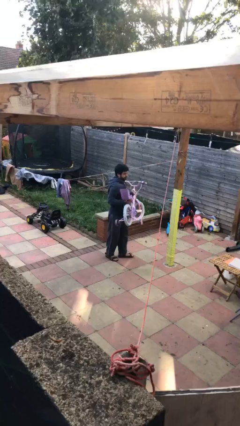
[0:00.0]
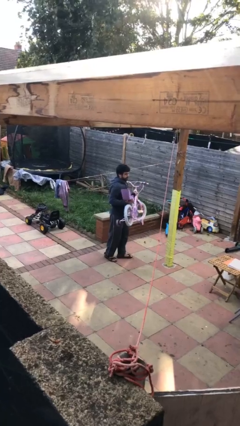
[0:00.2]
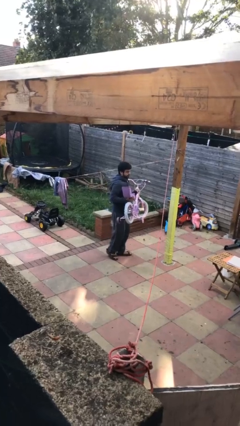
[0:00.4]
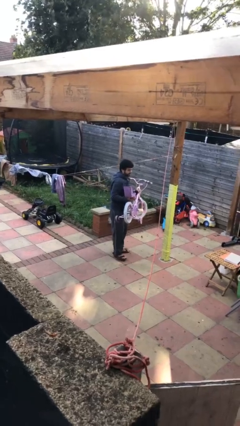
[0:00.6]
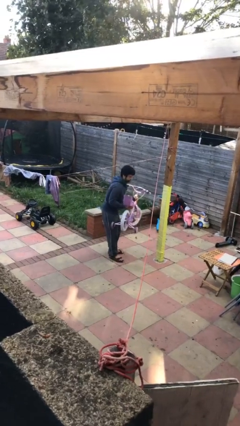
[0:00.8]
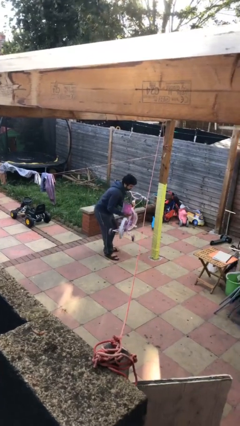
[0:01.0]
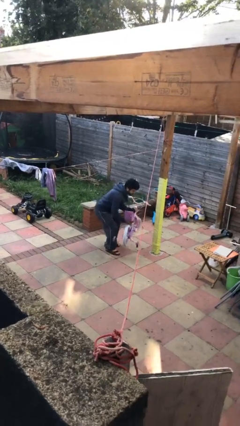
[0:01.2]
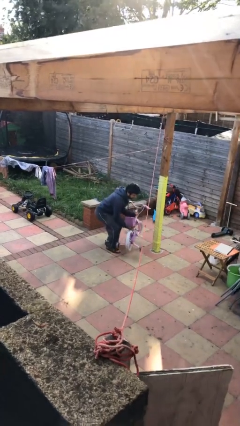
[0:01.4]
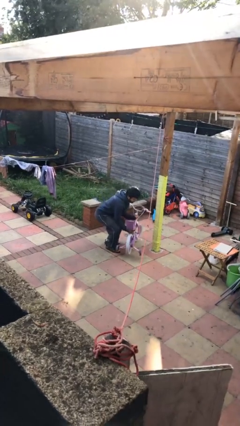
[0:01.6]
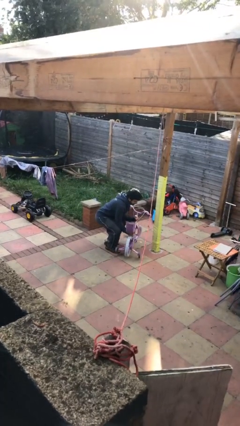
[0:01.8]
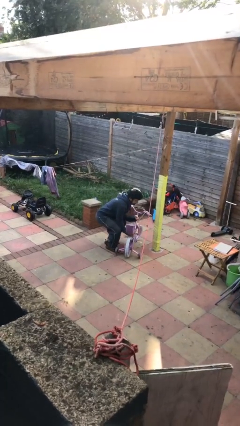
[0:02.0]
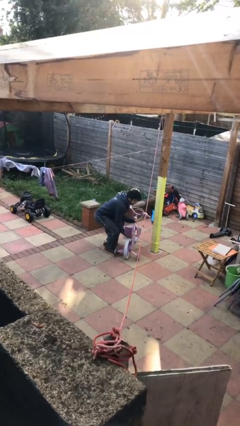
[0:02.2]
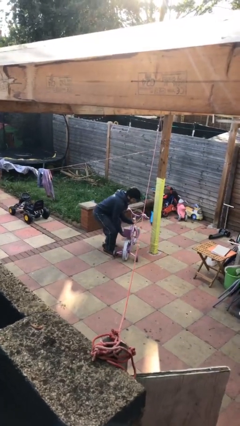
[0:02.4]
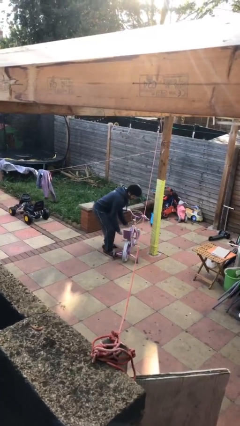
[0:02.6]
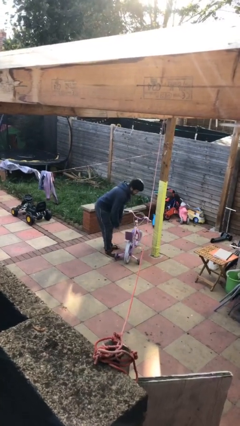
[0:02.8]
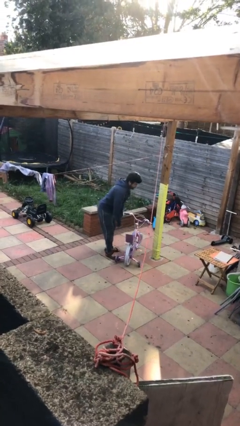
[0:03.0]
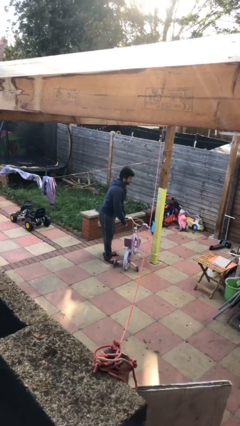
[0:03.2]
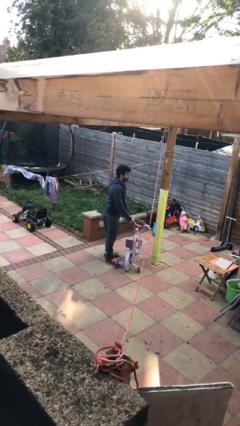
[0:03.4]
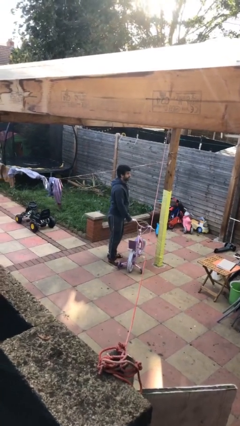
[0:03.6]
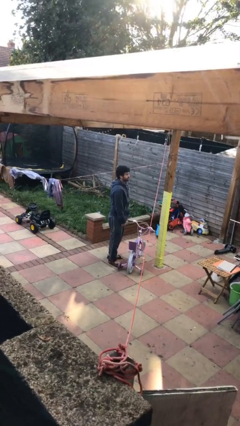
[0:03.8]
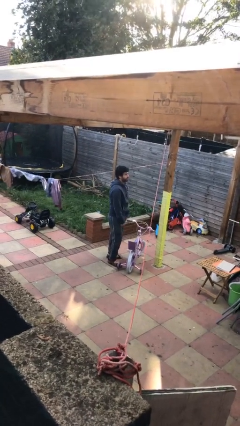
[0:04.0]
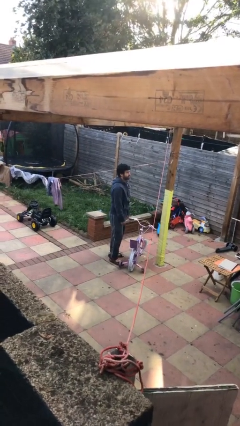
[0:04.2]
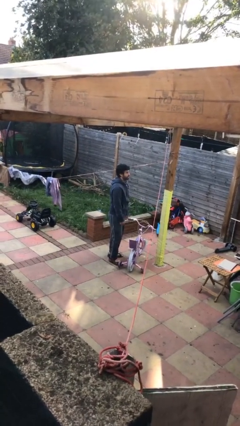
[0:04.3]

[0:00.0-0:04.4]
person puts down object on floor

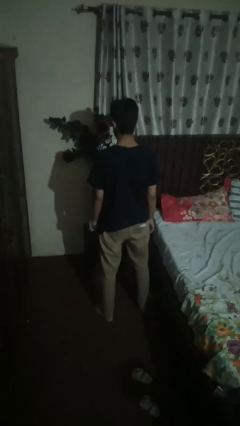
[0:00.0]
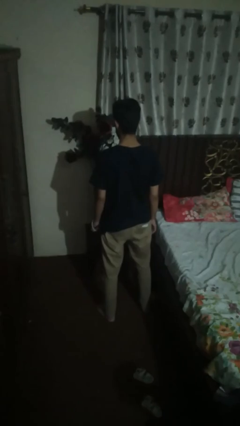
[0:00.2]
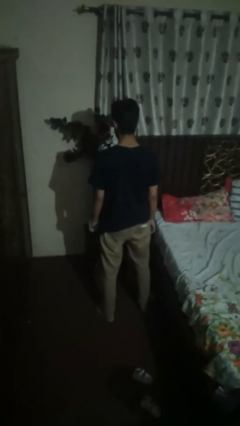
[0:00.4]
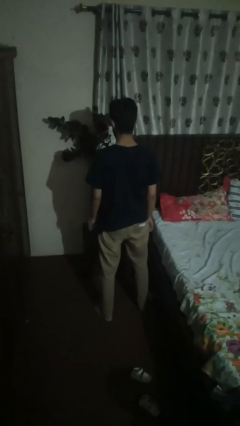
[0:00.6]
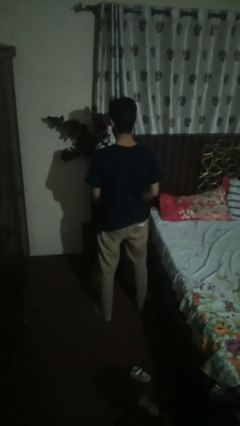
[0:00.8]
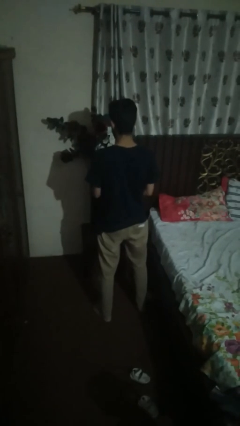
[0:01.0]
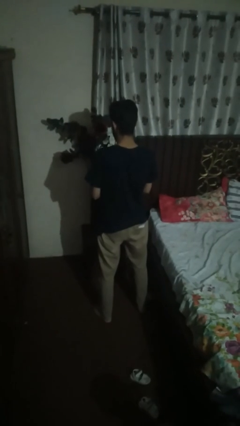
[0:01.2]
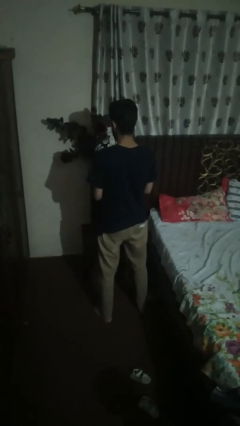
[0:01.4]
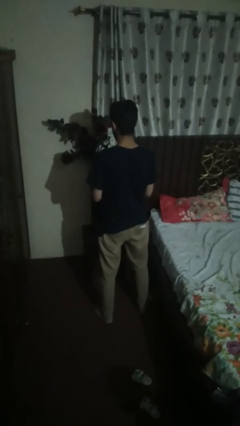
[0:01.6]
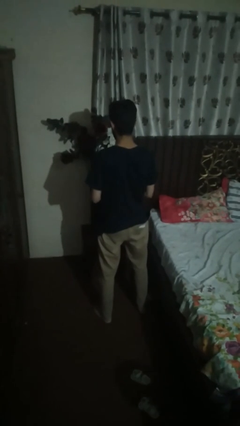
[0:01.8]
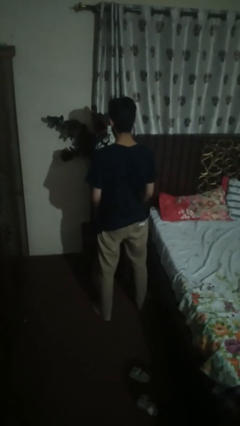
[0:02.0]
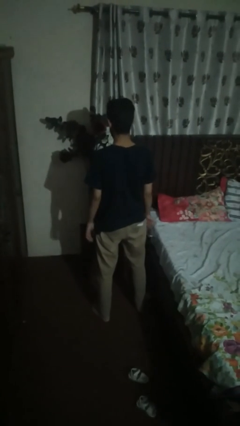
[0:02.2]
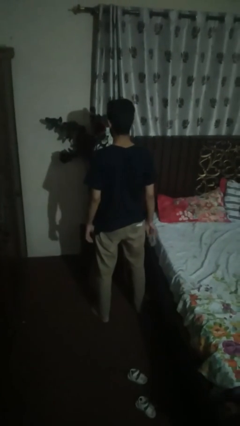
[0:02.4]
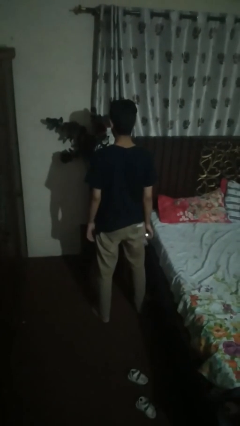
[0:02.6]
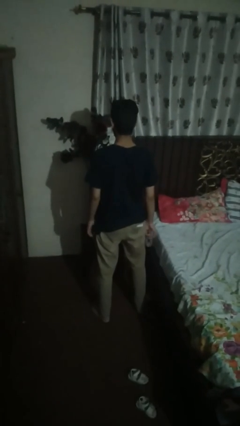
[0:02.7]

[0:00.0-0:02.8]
person takes off wristwatch

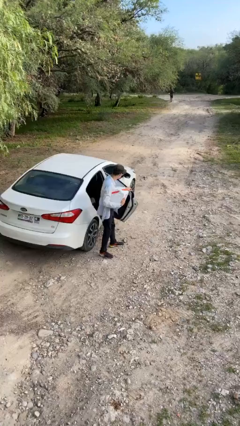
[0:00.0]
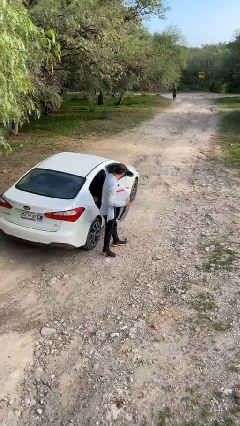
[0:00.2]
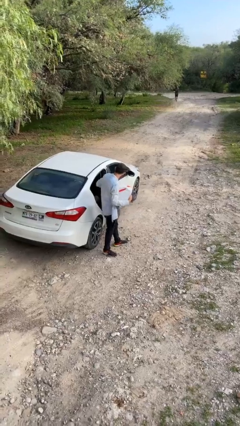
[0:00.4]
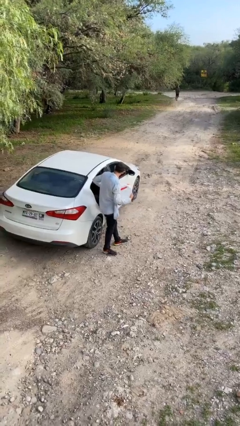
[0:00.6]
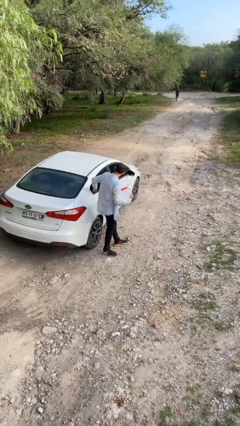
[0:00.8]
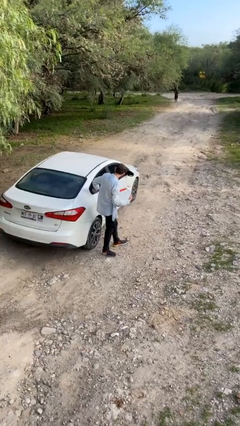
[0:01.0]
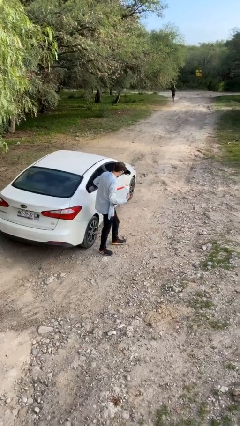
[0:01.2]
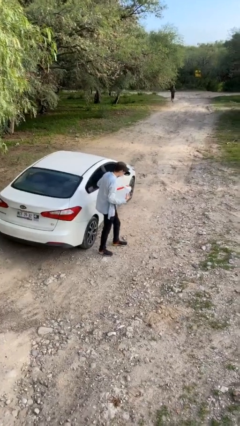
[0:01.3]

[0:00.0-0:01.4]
person closes car door

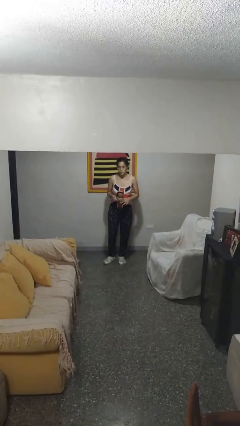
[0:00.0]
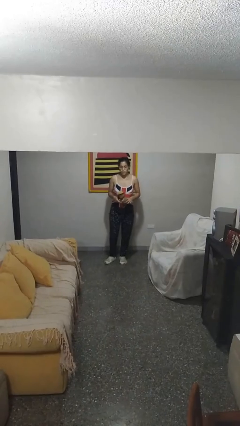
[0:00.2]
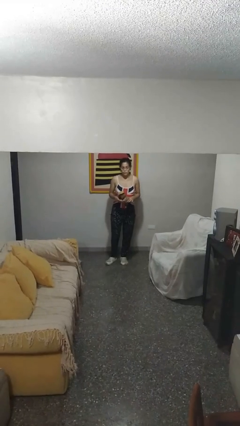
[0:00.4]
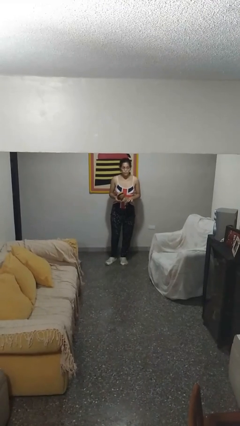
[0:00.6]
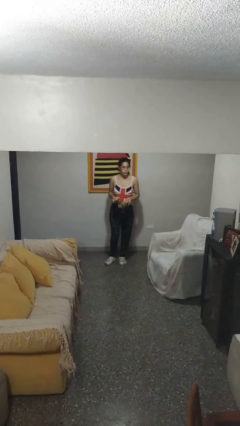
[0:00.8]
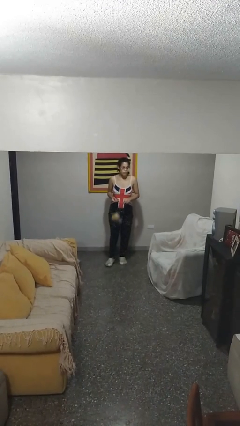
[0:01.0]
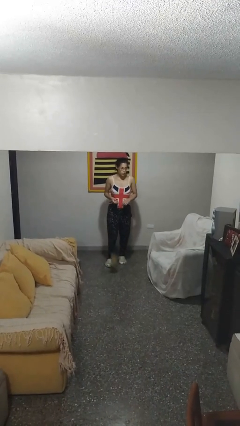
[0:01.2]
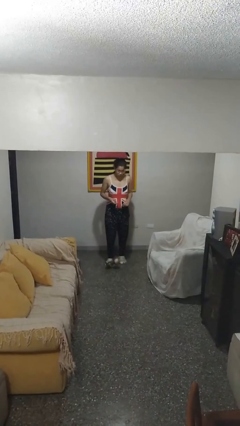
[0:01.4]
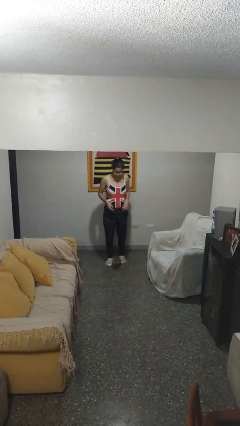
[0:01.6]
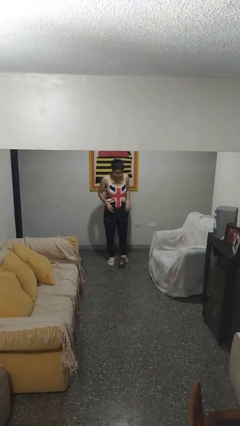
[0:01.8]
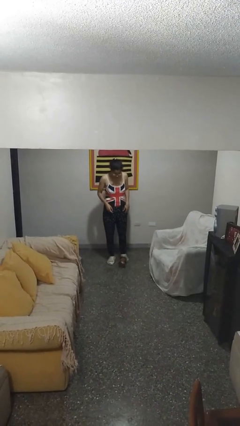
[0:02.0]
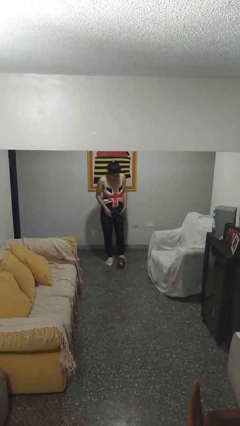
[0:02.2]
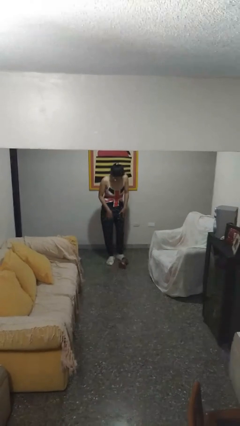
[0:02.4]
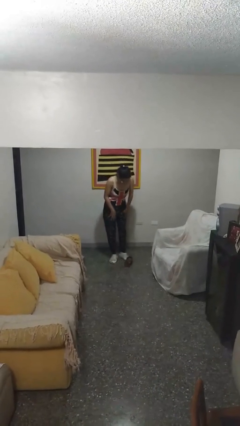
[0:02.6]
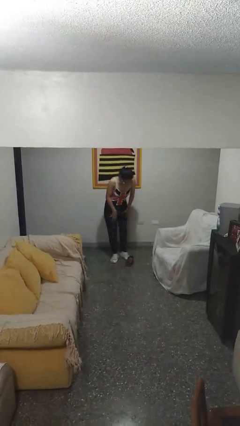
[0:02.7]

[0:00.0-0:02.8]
person drops object

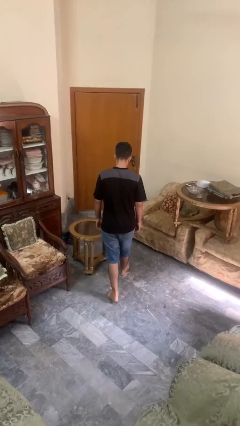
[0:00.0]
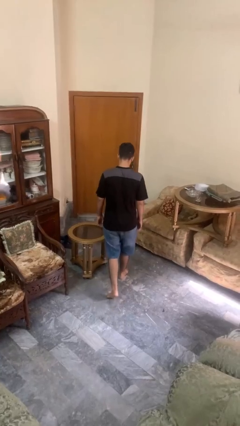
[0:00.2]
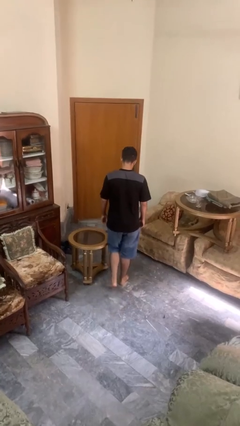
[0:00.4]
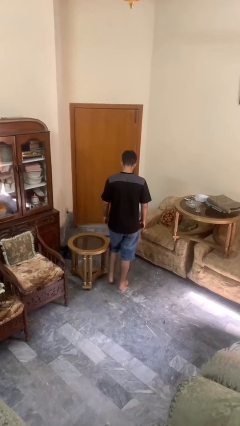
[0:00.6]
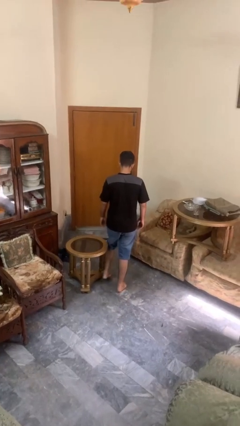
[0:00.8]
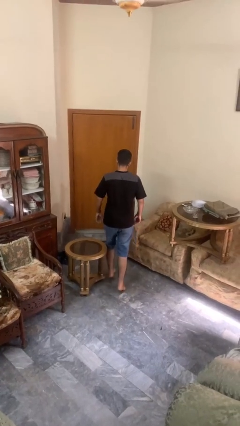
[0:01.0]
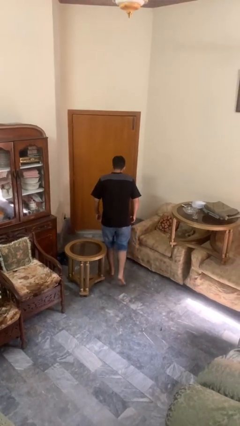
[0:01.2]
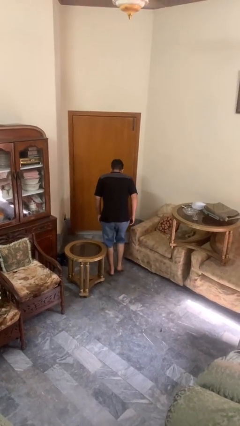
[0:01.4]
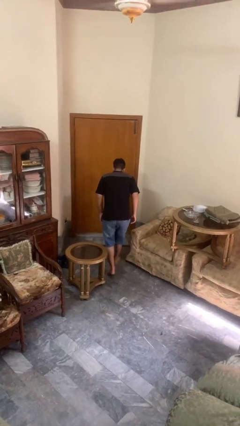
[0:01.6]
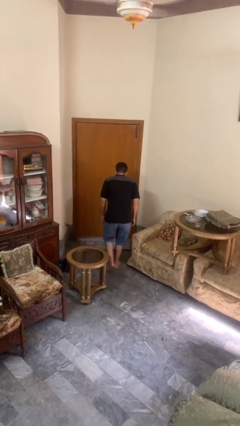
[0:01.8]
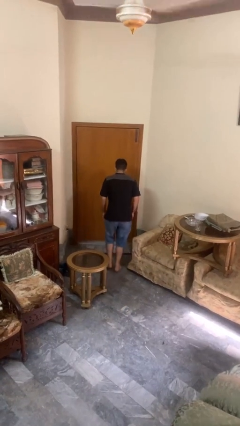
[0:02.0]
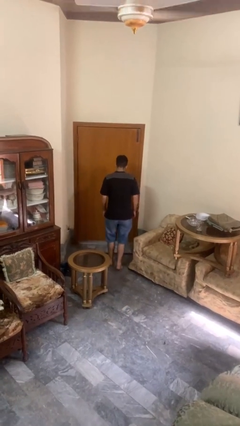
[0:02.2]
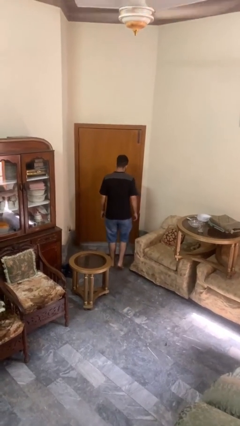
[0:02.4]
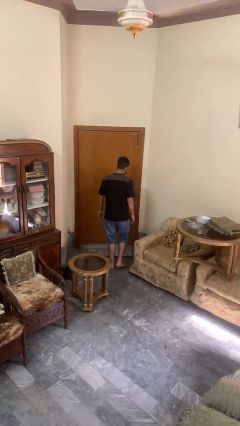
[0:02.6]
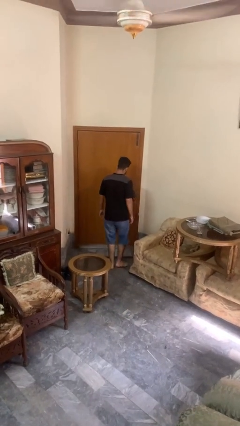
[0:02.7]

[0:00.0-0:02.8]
person stubs toe

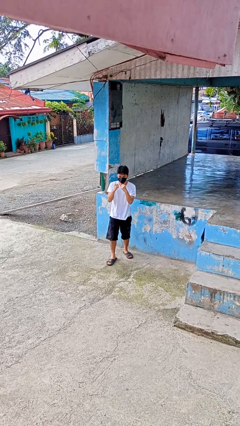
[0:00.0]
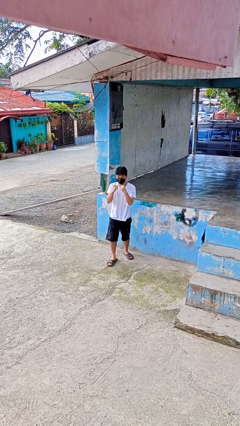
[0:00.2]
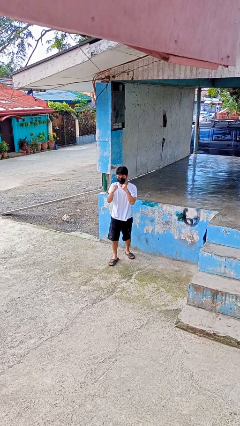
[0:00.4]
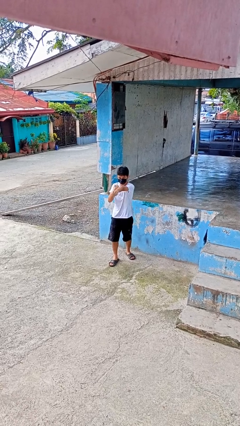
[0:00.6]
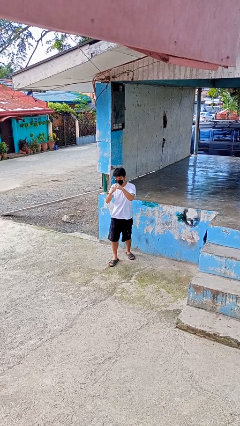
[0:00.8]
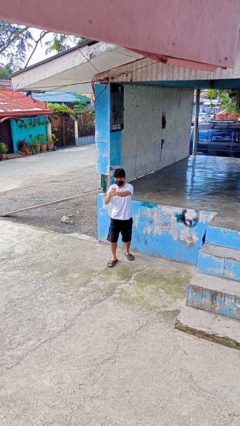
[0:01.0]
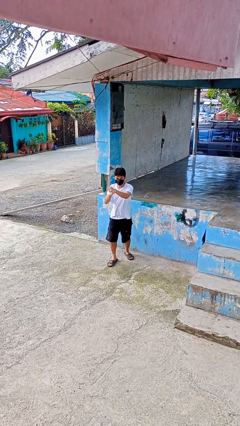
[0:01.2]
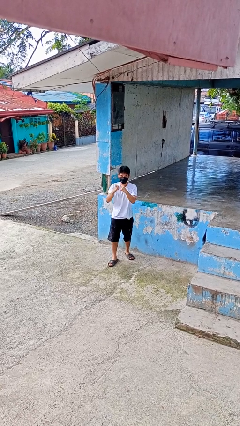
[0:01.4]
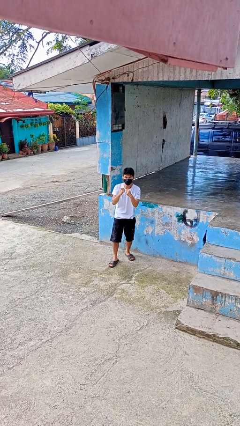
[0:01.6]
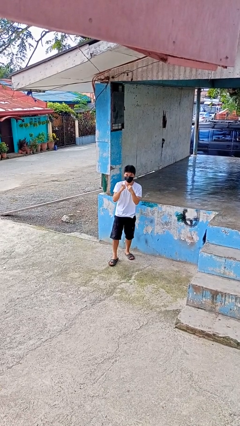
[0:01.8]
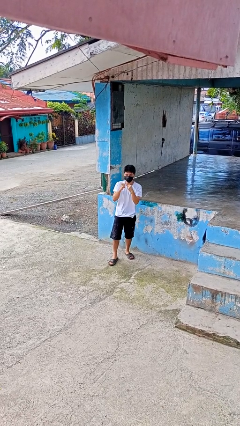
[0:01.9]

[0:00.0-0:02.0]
person punches

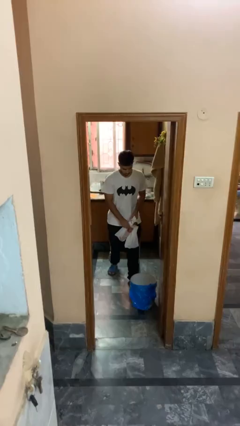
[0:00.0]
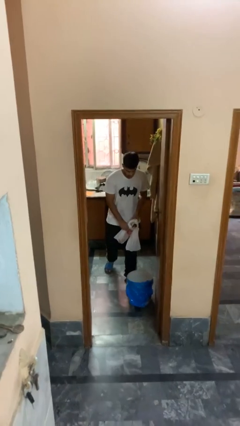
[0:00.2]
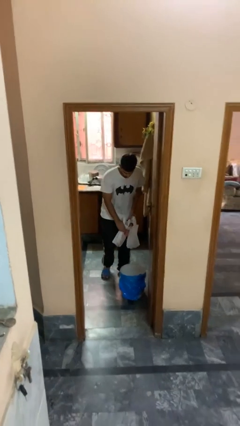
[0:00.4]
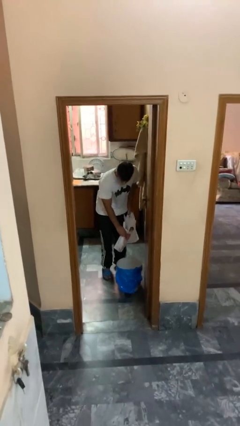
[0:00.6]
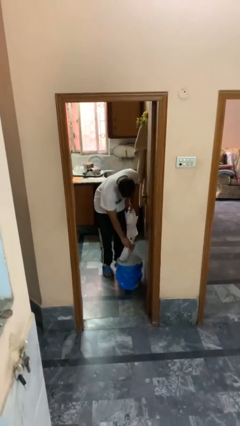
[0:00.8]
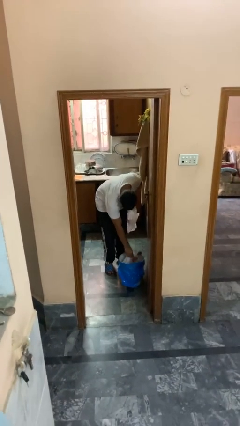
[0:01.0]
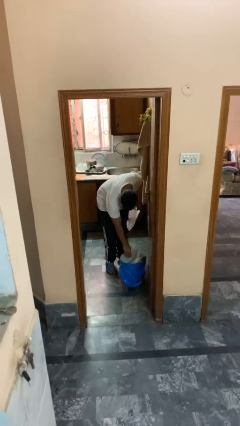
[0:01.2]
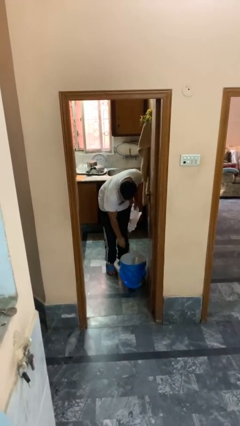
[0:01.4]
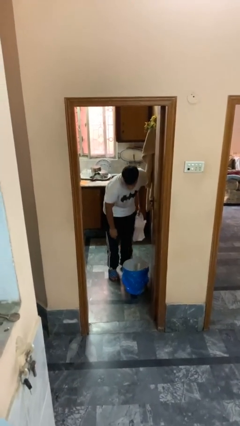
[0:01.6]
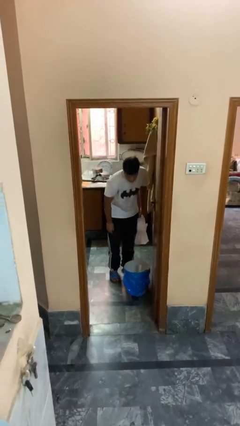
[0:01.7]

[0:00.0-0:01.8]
person discards trash
